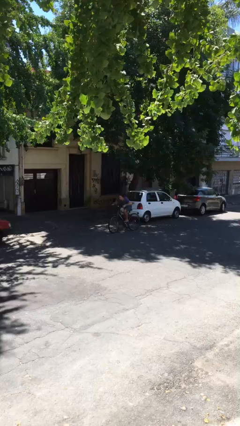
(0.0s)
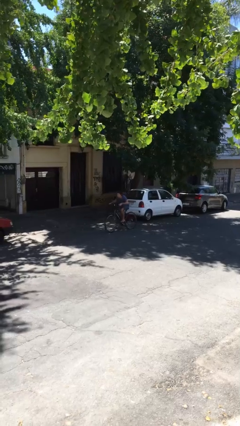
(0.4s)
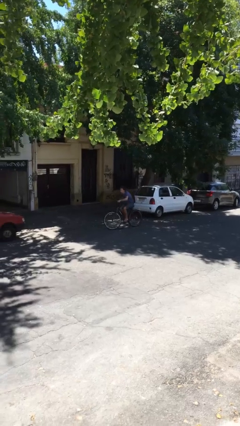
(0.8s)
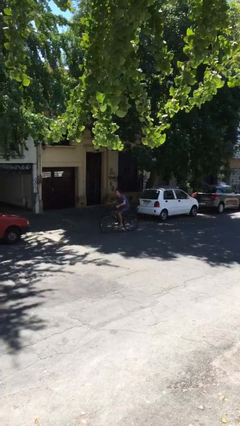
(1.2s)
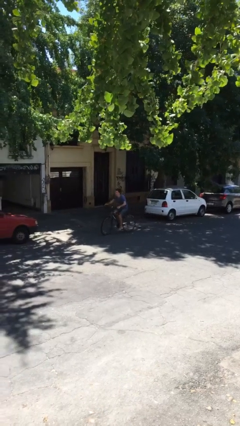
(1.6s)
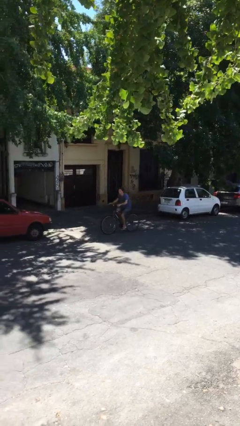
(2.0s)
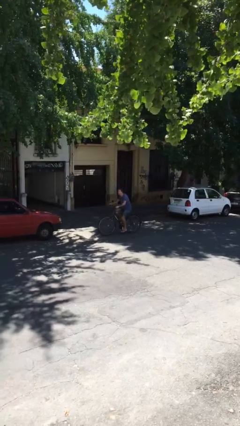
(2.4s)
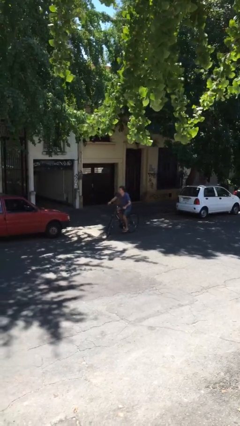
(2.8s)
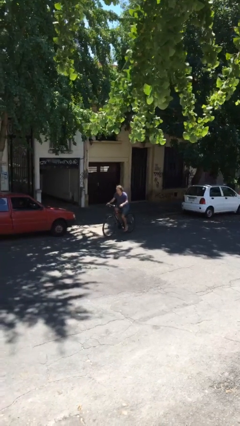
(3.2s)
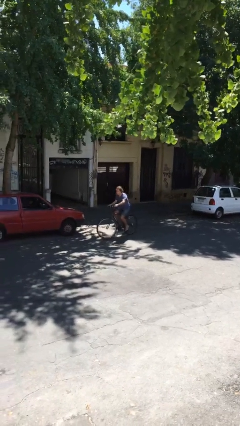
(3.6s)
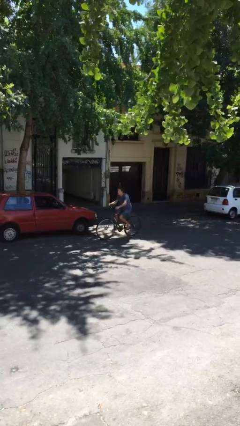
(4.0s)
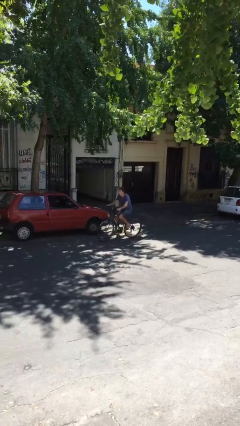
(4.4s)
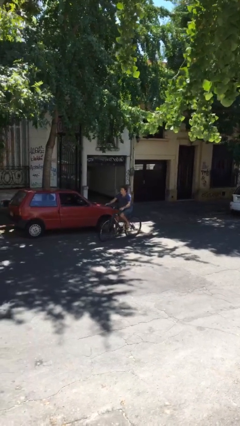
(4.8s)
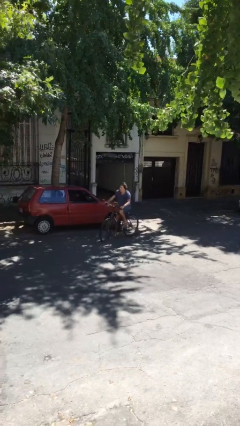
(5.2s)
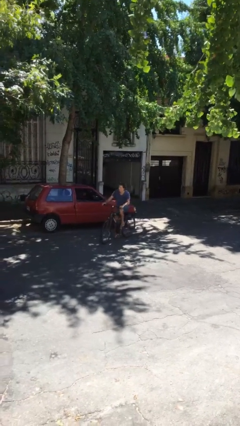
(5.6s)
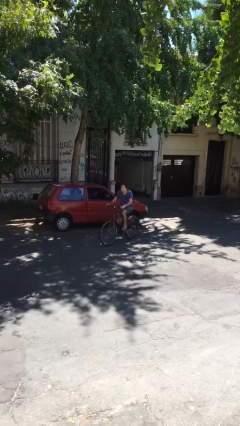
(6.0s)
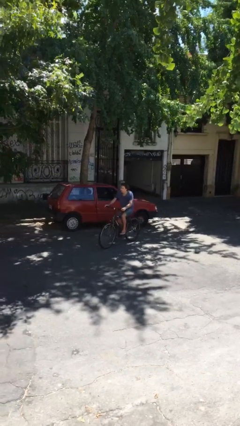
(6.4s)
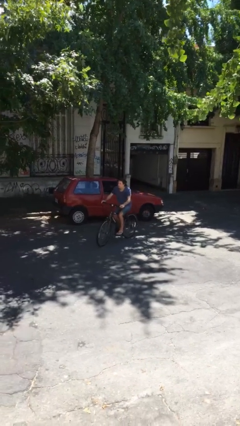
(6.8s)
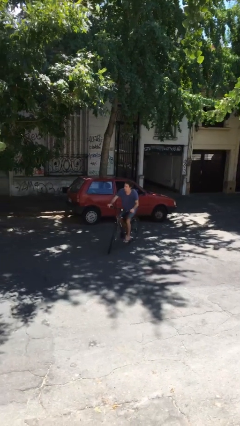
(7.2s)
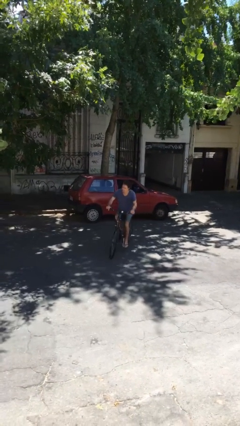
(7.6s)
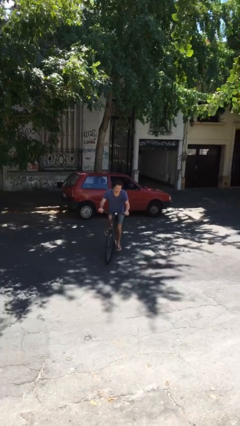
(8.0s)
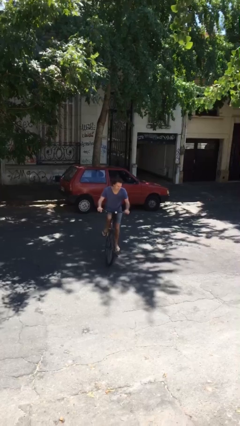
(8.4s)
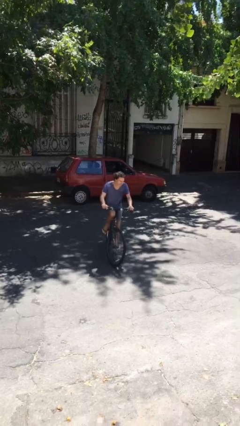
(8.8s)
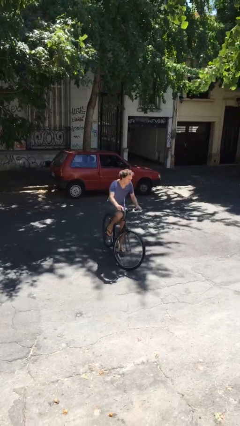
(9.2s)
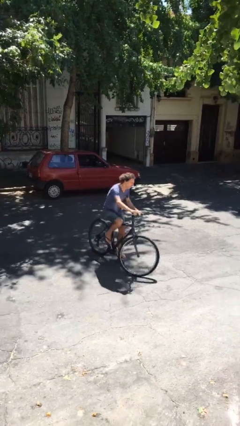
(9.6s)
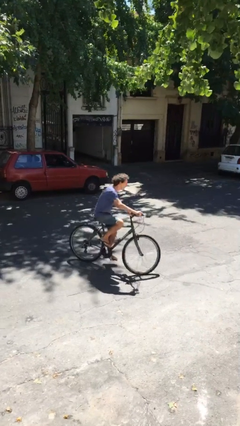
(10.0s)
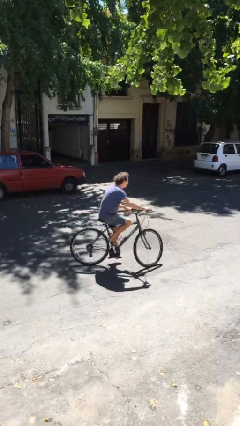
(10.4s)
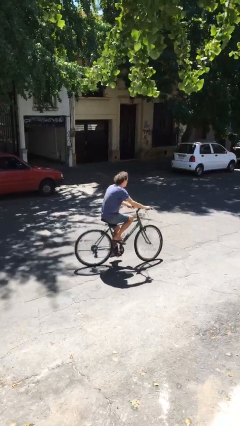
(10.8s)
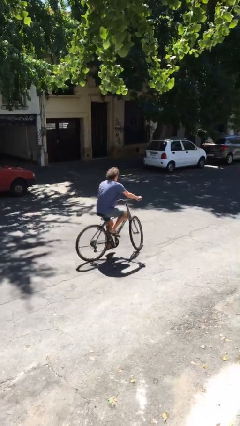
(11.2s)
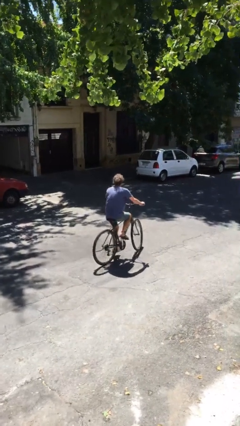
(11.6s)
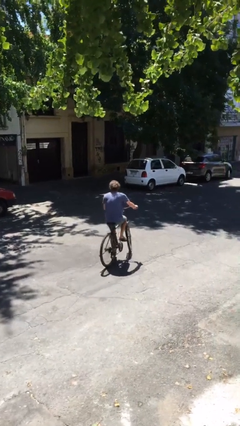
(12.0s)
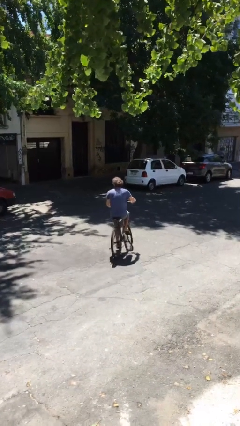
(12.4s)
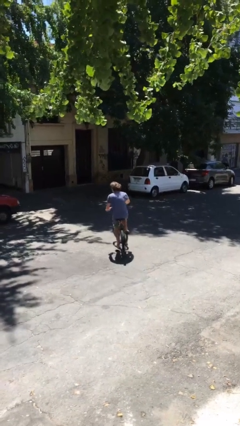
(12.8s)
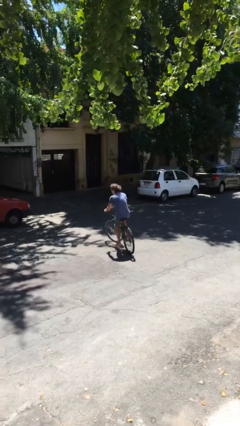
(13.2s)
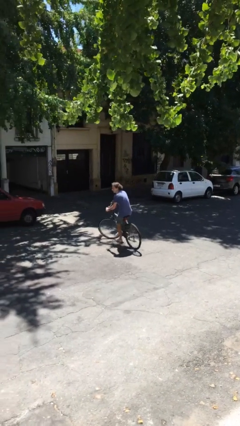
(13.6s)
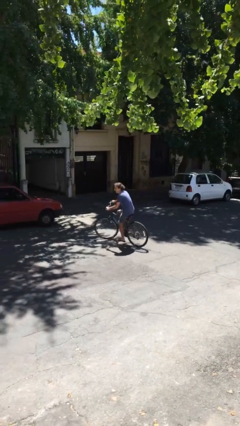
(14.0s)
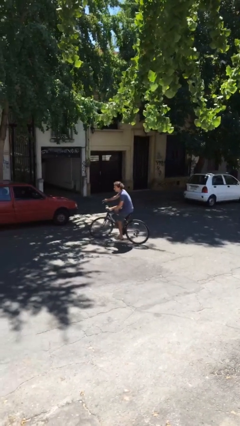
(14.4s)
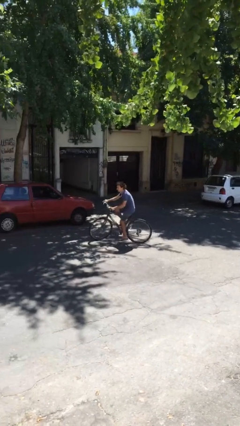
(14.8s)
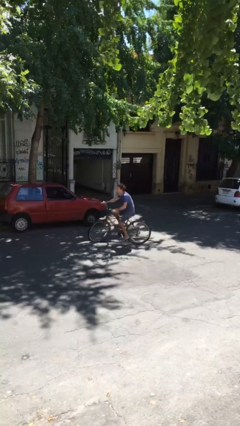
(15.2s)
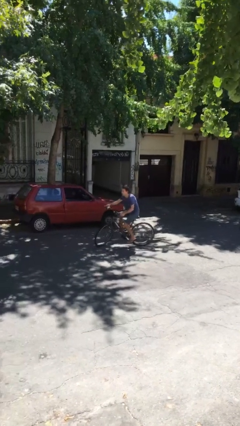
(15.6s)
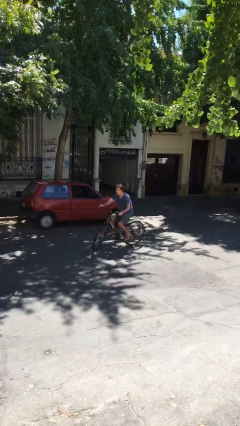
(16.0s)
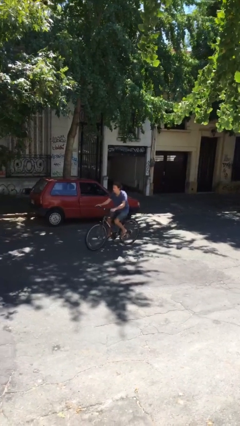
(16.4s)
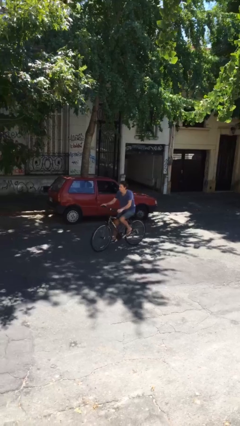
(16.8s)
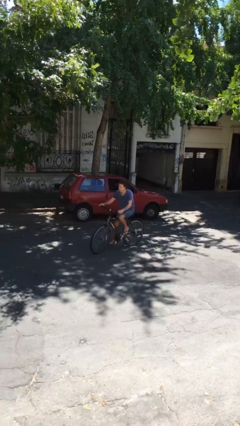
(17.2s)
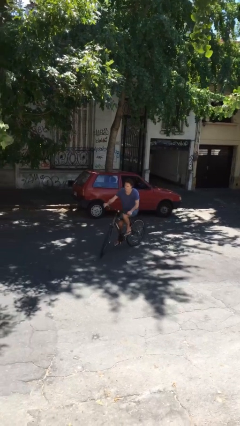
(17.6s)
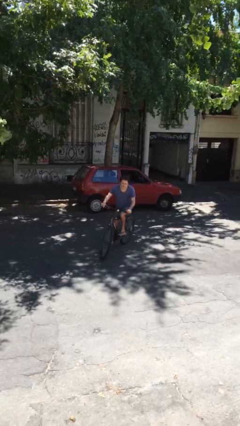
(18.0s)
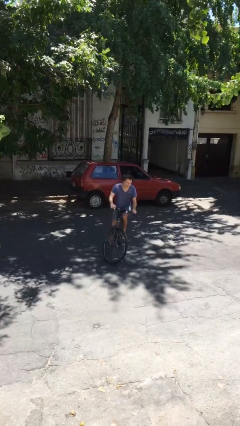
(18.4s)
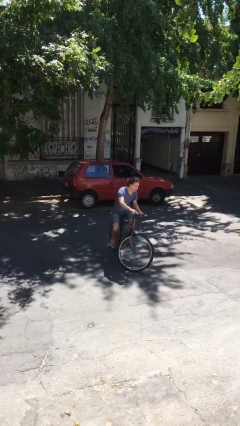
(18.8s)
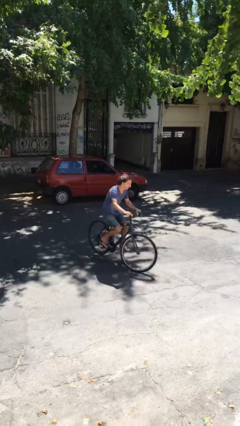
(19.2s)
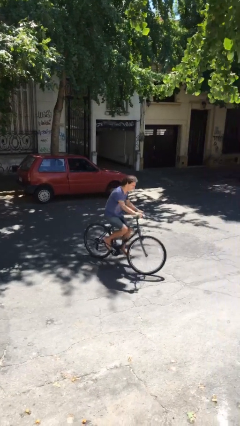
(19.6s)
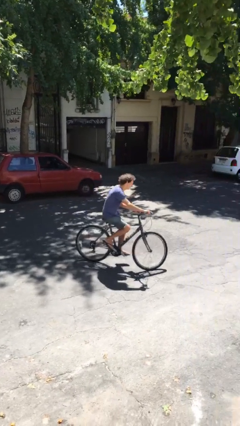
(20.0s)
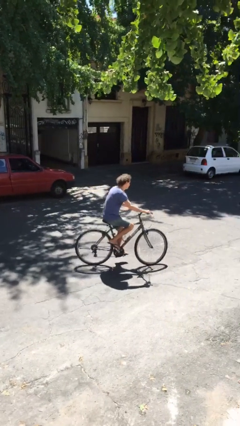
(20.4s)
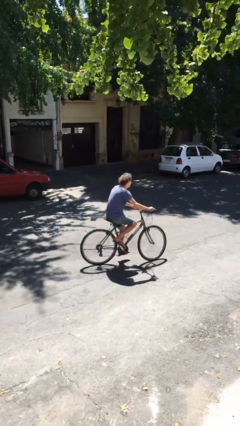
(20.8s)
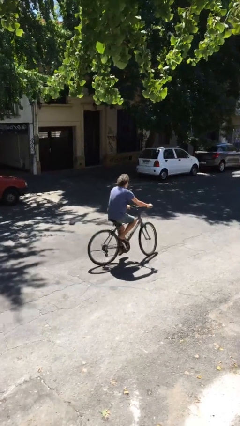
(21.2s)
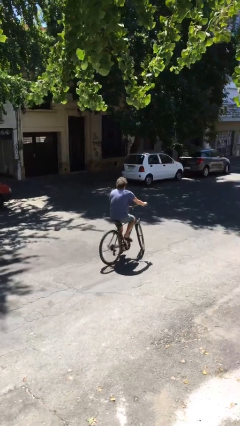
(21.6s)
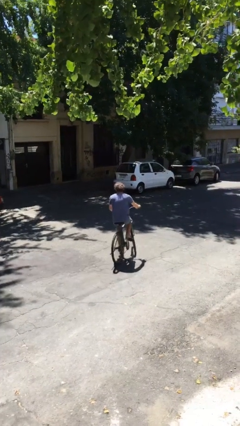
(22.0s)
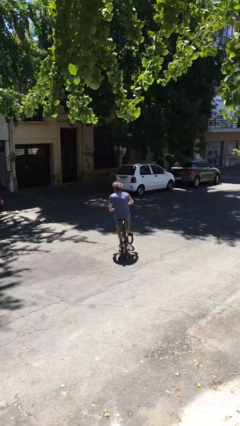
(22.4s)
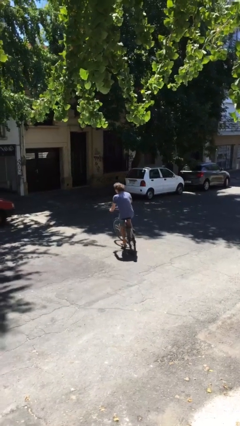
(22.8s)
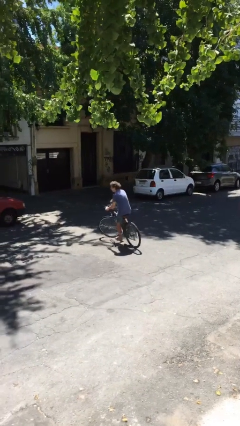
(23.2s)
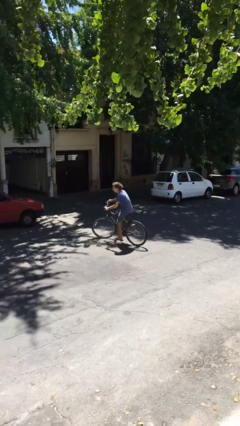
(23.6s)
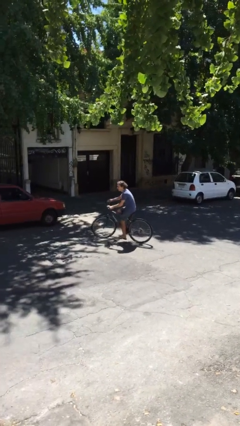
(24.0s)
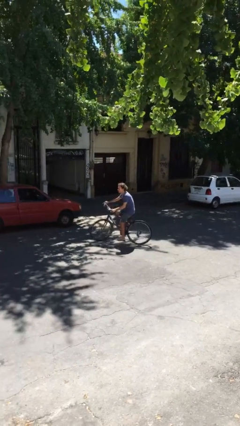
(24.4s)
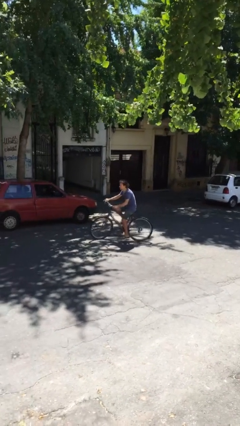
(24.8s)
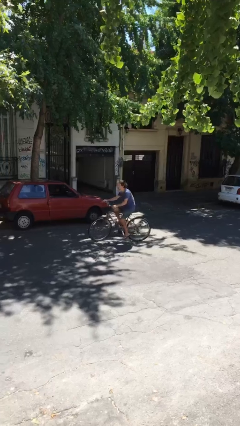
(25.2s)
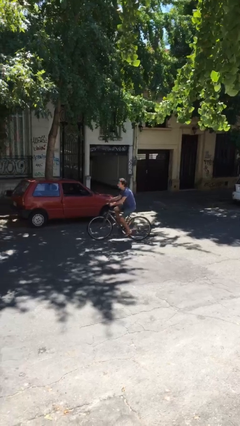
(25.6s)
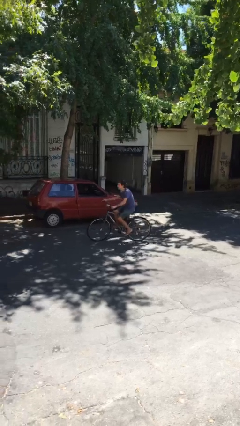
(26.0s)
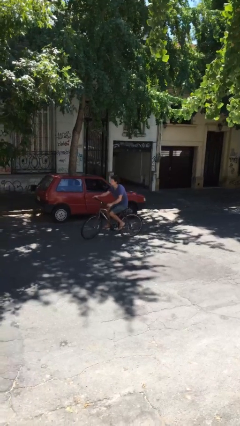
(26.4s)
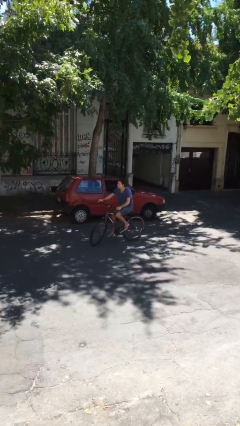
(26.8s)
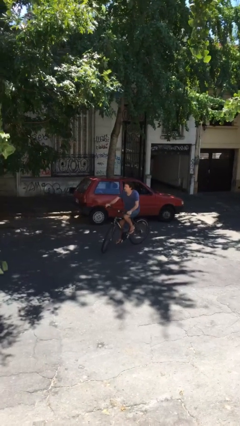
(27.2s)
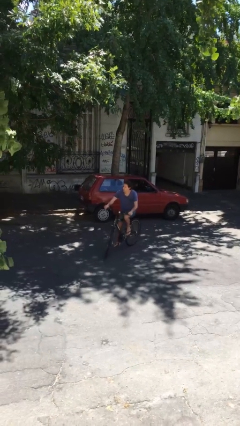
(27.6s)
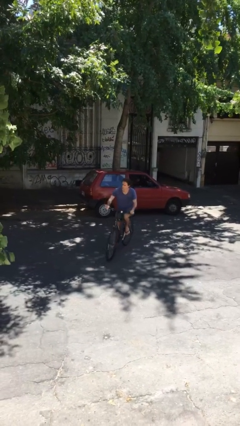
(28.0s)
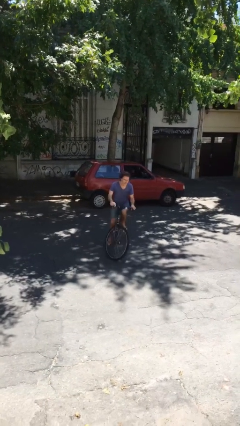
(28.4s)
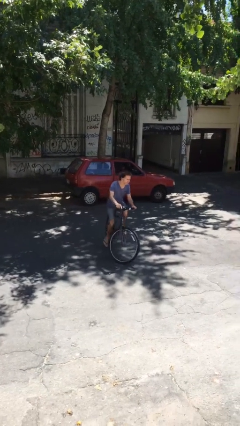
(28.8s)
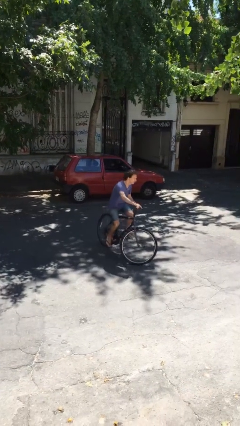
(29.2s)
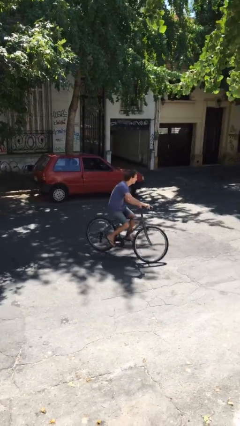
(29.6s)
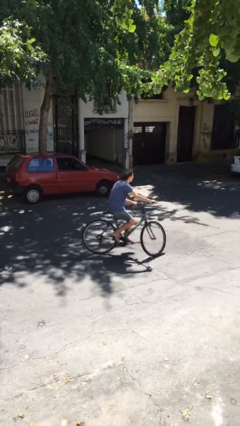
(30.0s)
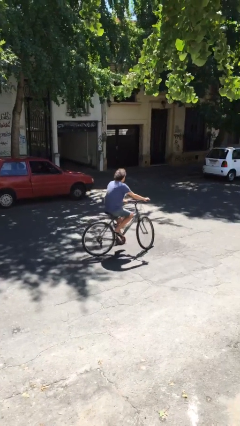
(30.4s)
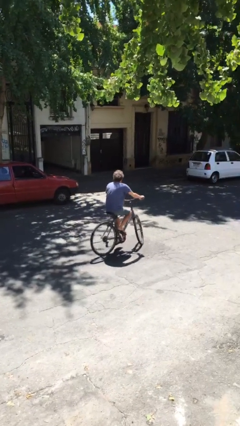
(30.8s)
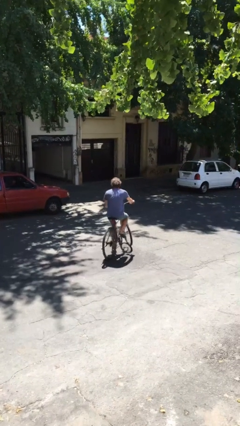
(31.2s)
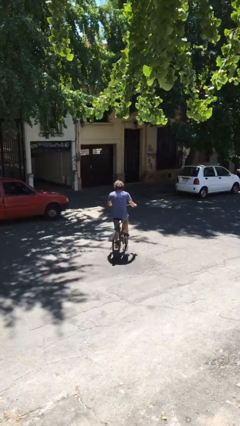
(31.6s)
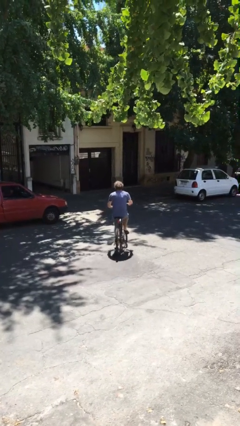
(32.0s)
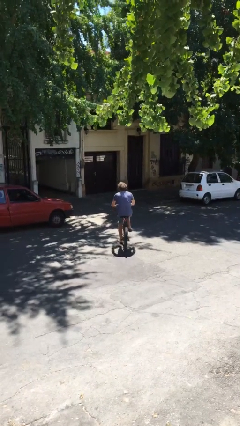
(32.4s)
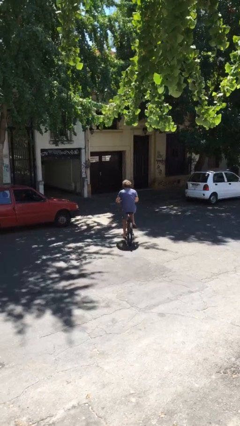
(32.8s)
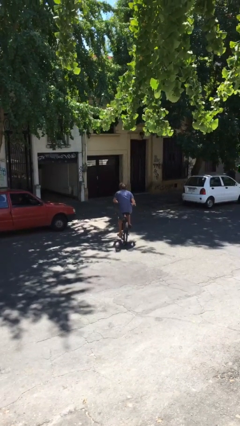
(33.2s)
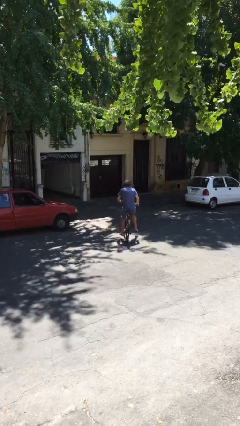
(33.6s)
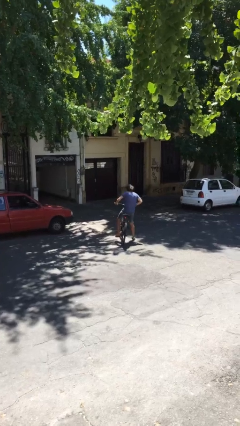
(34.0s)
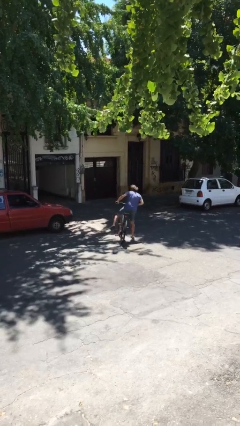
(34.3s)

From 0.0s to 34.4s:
person rides bicycle

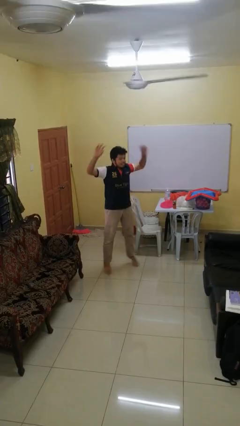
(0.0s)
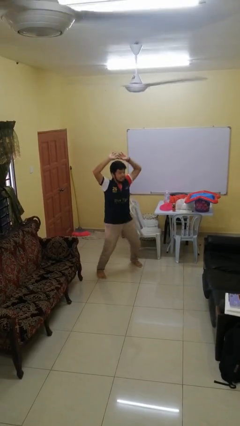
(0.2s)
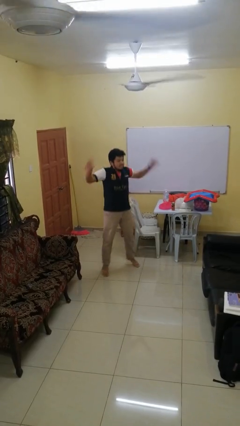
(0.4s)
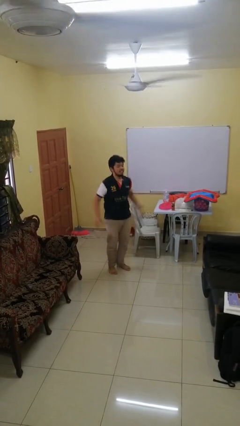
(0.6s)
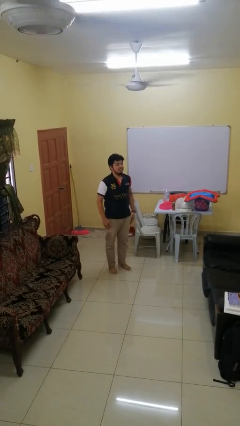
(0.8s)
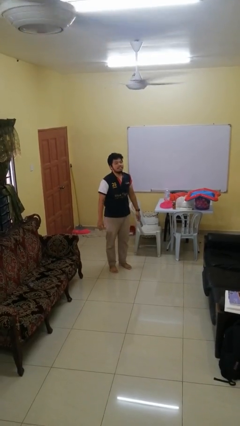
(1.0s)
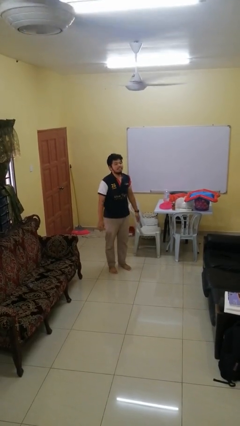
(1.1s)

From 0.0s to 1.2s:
person exercises with jumping jacks
